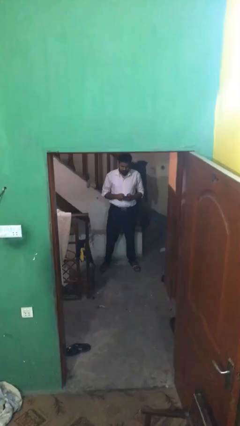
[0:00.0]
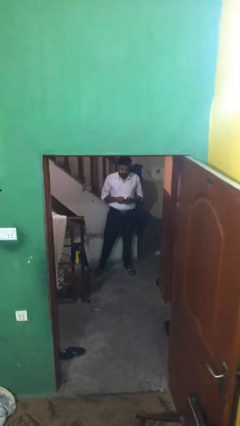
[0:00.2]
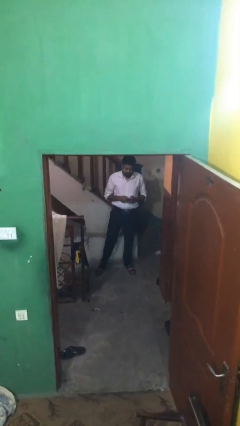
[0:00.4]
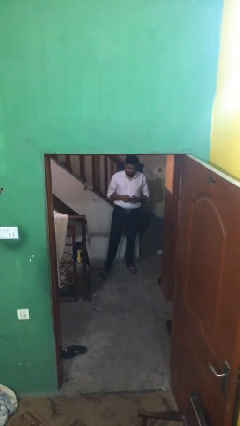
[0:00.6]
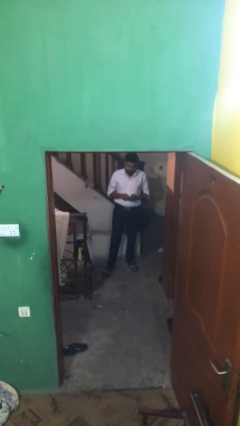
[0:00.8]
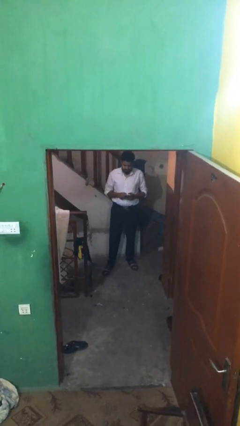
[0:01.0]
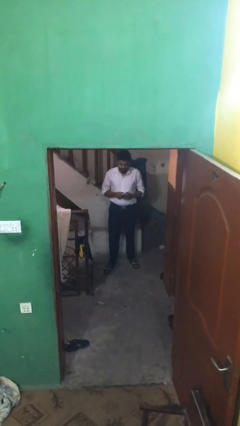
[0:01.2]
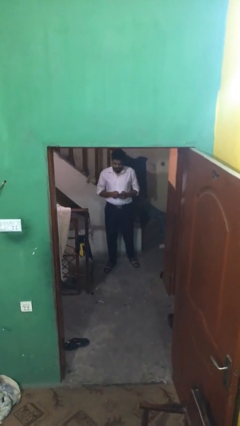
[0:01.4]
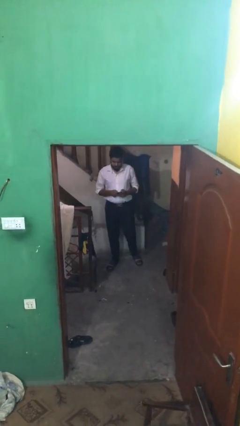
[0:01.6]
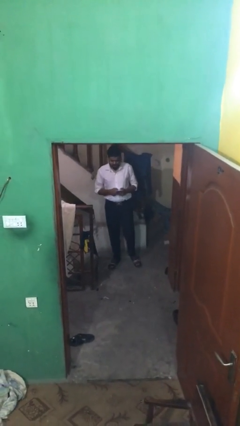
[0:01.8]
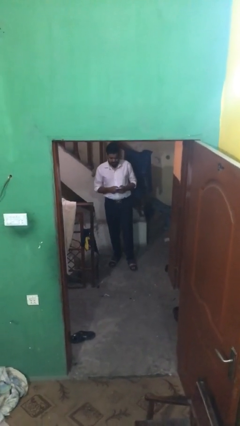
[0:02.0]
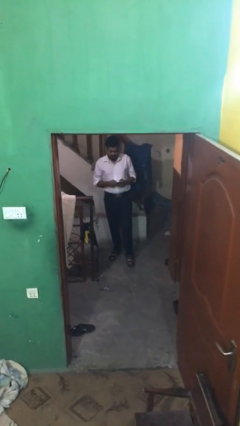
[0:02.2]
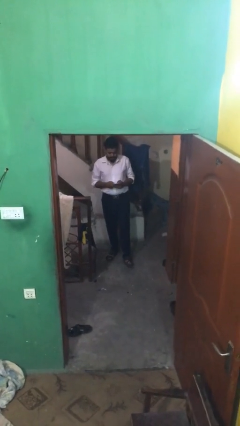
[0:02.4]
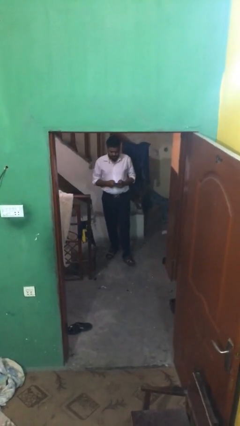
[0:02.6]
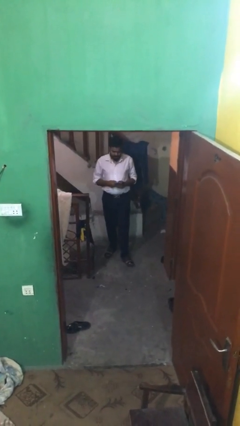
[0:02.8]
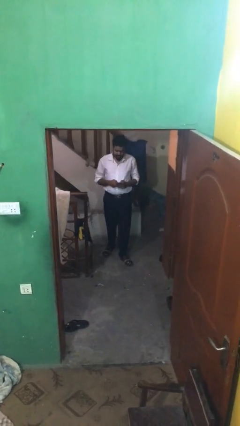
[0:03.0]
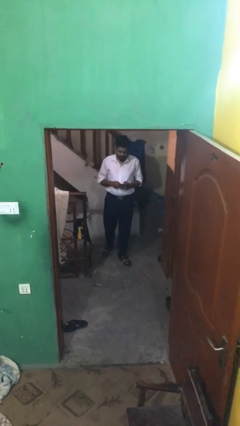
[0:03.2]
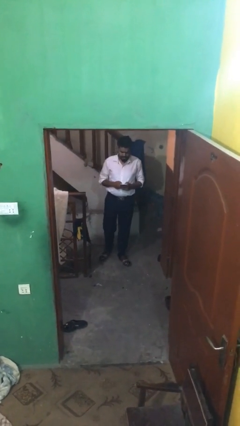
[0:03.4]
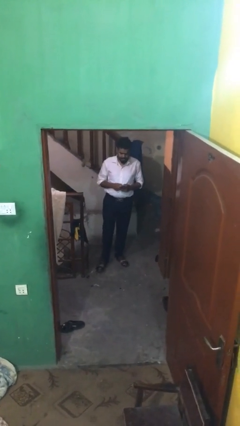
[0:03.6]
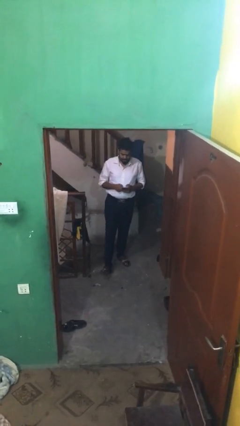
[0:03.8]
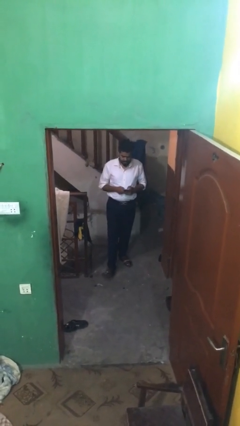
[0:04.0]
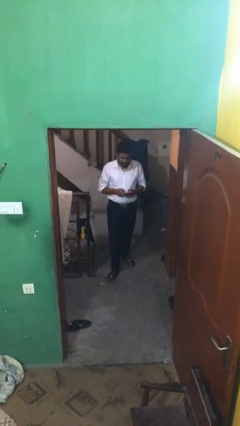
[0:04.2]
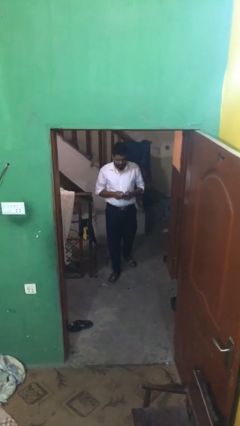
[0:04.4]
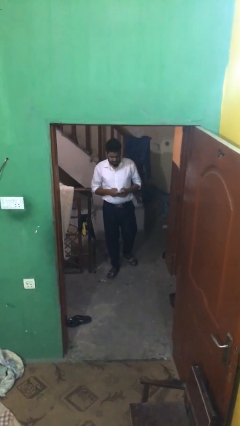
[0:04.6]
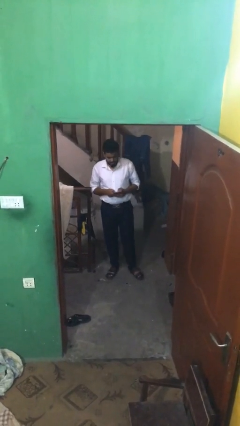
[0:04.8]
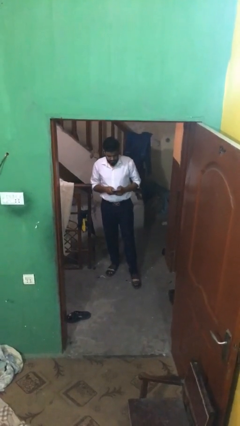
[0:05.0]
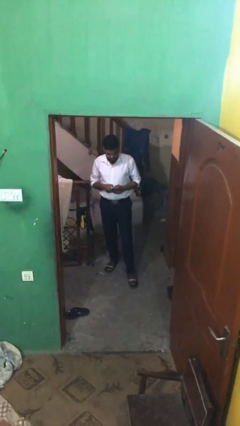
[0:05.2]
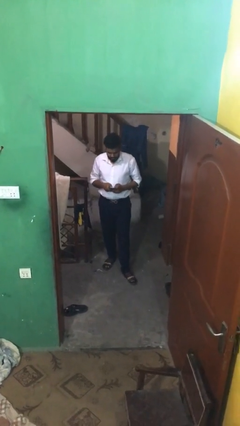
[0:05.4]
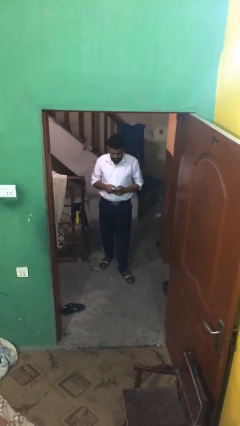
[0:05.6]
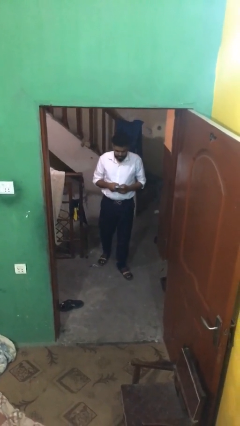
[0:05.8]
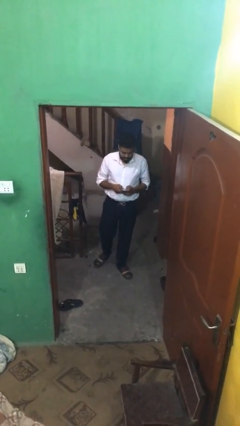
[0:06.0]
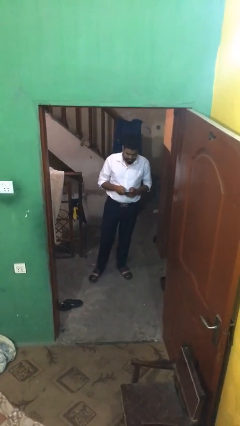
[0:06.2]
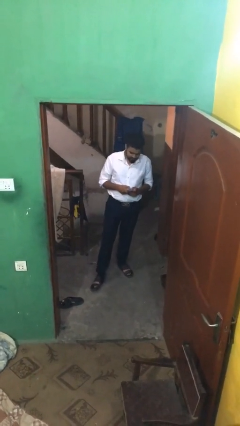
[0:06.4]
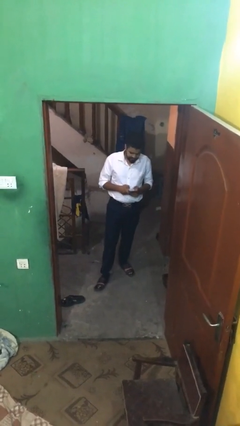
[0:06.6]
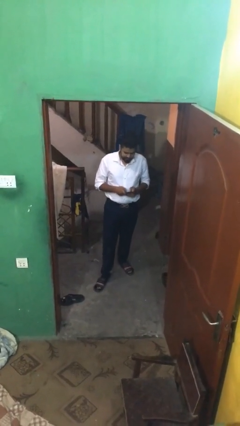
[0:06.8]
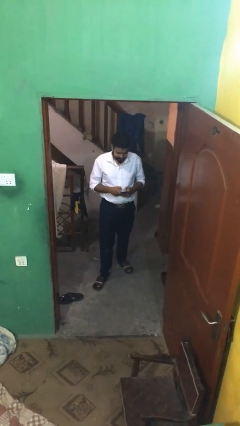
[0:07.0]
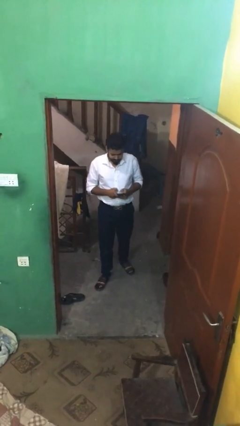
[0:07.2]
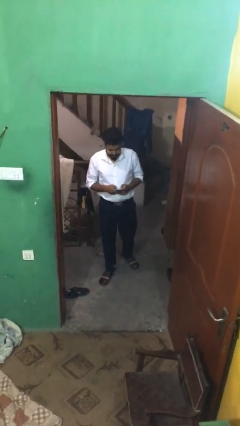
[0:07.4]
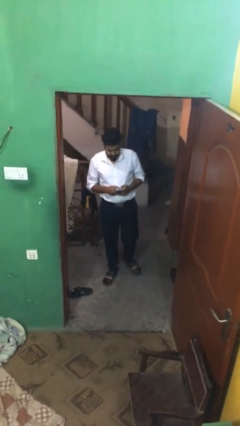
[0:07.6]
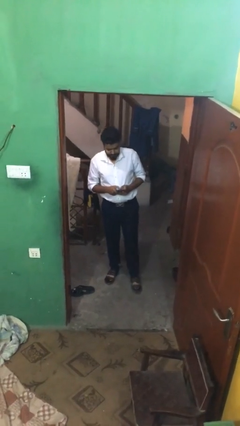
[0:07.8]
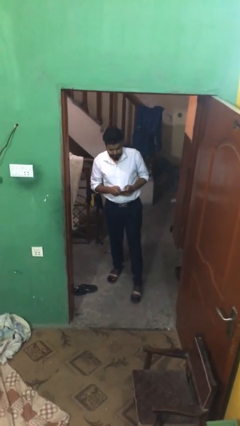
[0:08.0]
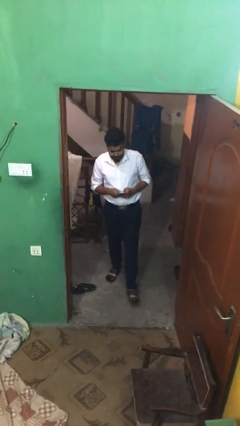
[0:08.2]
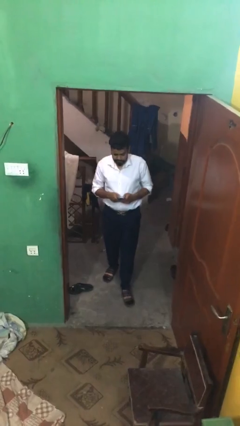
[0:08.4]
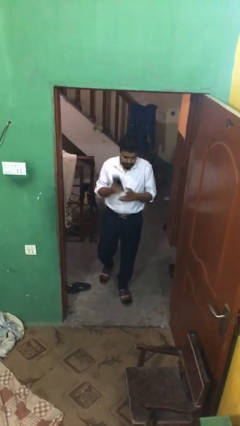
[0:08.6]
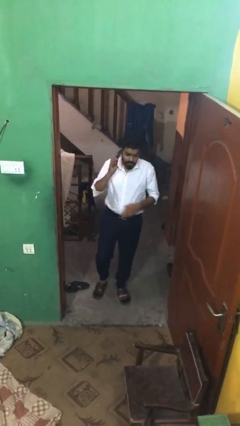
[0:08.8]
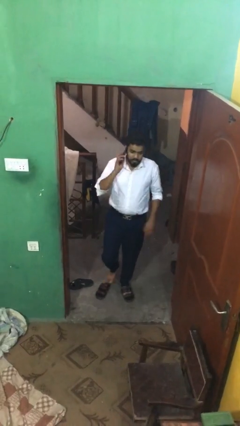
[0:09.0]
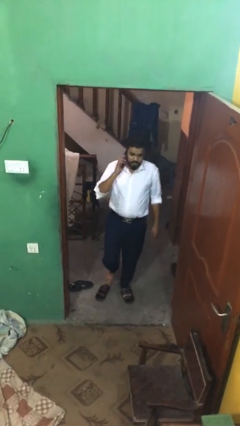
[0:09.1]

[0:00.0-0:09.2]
person texts on phone

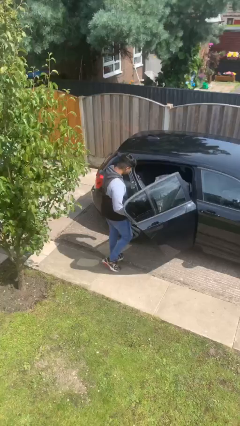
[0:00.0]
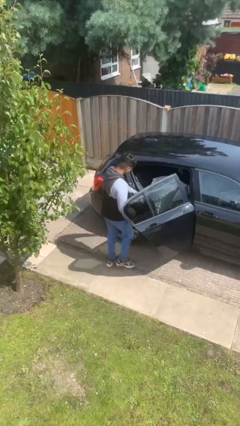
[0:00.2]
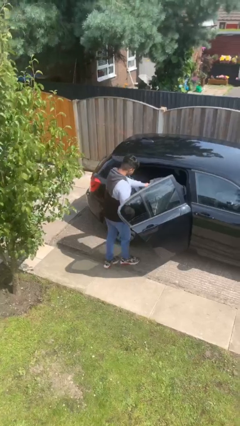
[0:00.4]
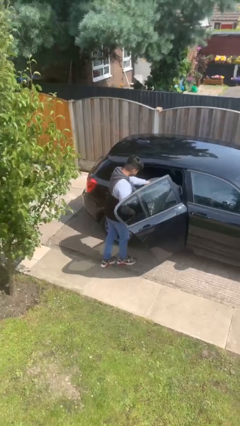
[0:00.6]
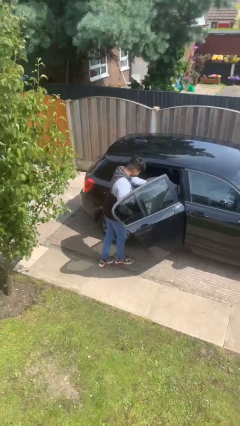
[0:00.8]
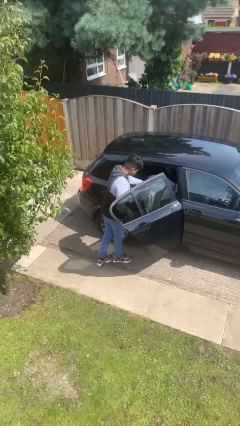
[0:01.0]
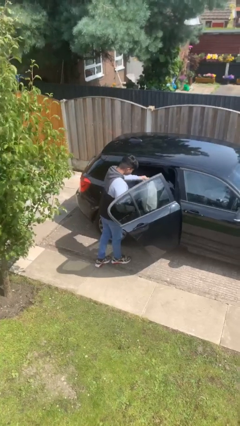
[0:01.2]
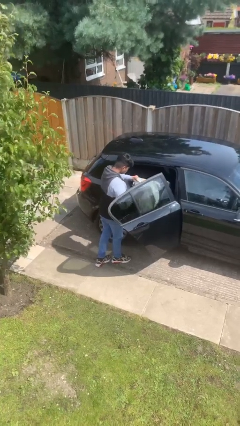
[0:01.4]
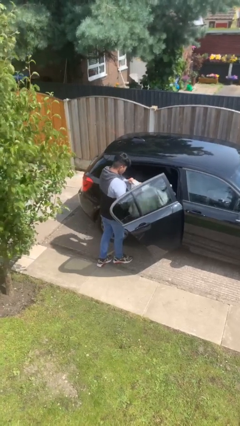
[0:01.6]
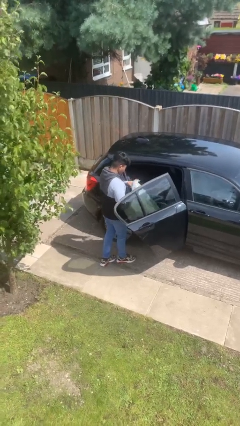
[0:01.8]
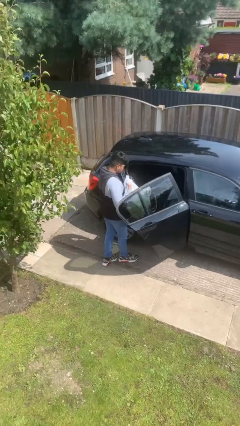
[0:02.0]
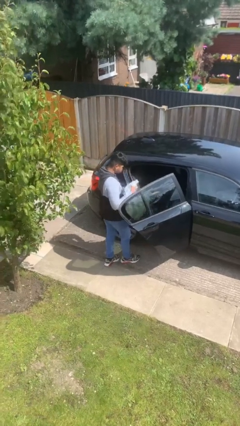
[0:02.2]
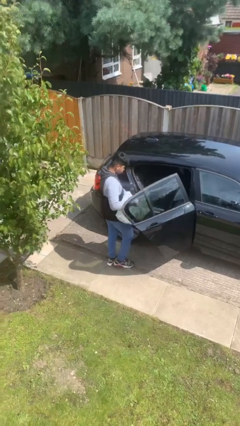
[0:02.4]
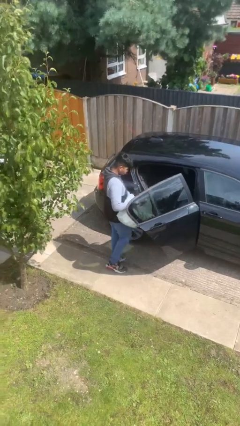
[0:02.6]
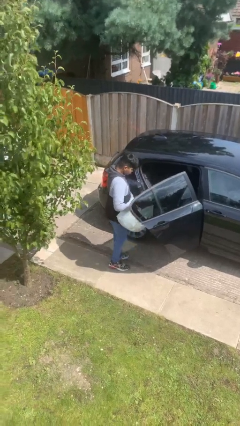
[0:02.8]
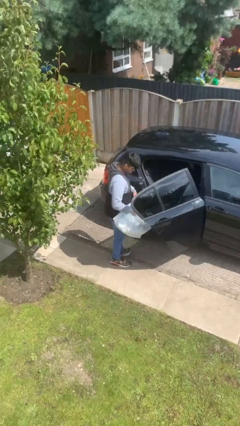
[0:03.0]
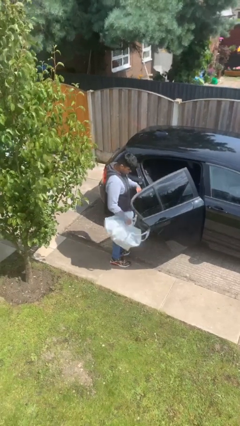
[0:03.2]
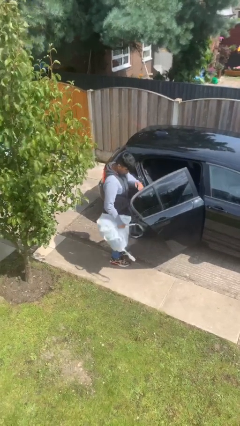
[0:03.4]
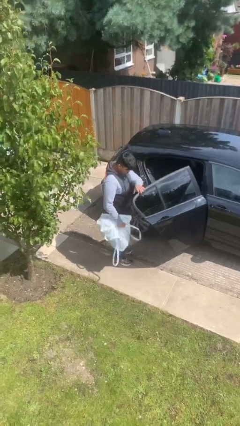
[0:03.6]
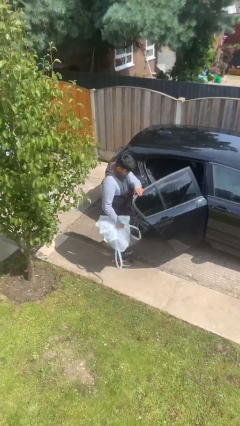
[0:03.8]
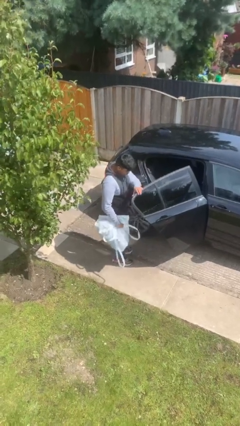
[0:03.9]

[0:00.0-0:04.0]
person unloads car

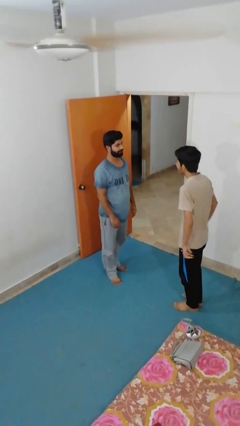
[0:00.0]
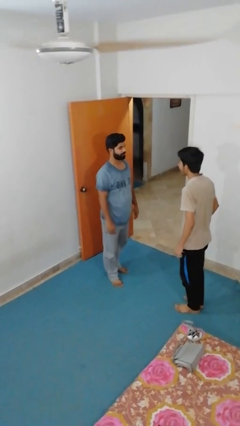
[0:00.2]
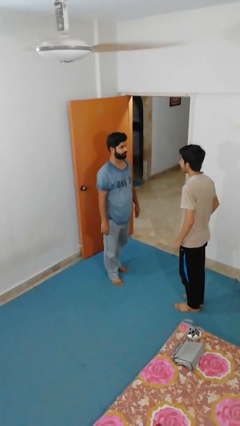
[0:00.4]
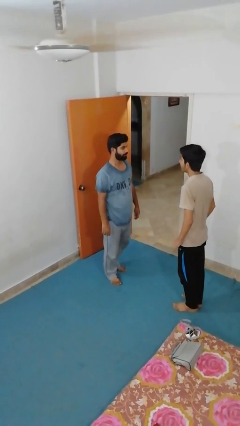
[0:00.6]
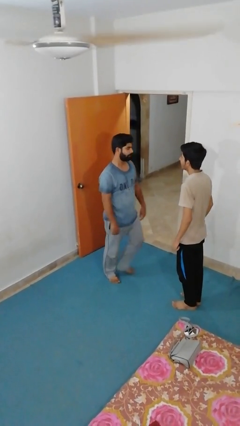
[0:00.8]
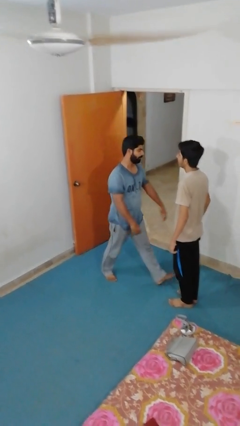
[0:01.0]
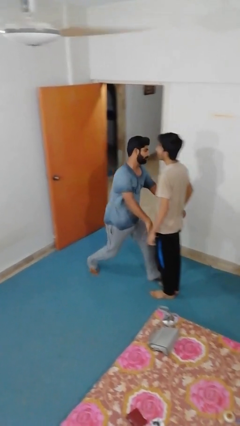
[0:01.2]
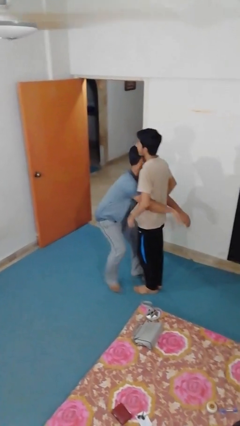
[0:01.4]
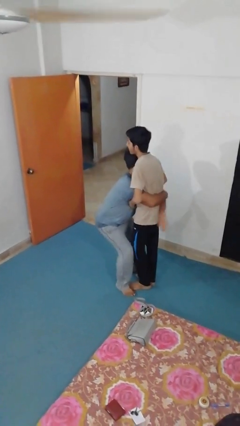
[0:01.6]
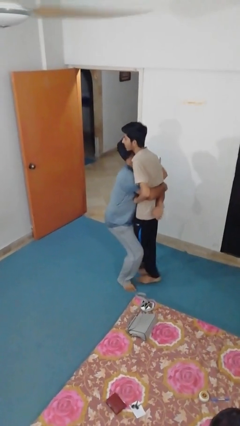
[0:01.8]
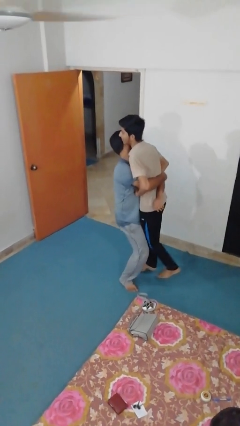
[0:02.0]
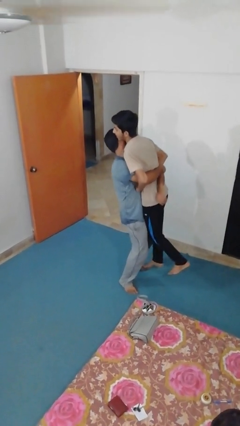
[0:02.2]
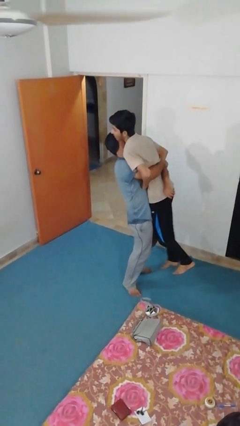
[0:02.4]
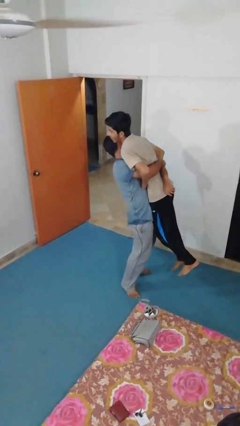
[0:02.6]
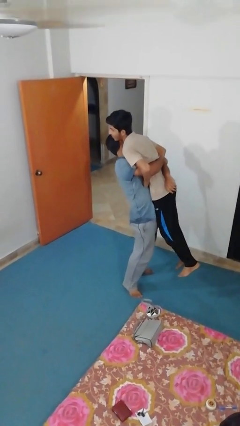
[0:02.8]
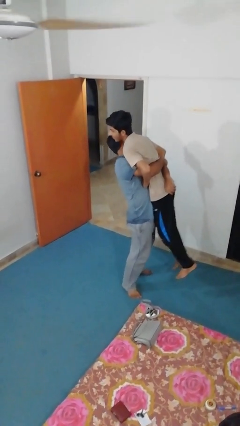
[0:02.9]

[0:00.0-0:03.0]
person picks up person

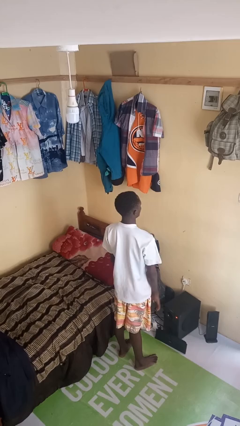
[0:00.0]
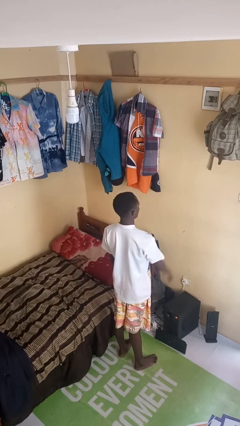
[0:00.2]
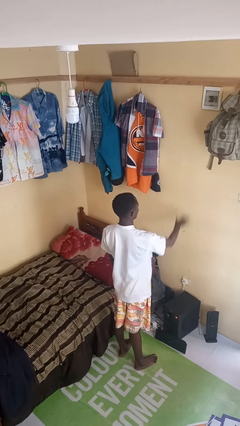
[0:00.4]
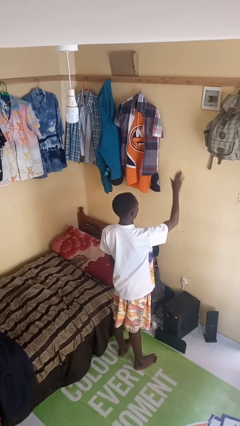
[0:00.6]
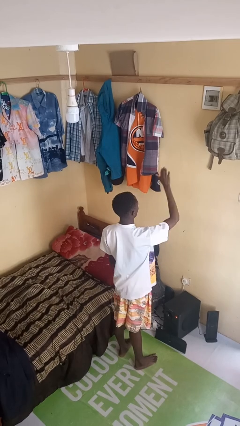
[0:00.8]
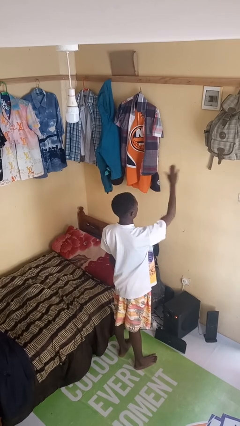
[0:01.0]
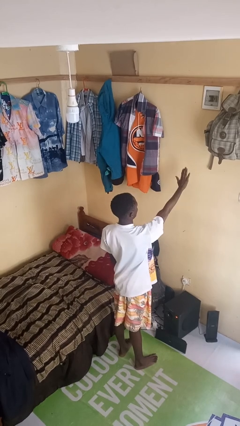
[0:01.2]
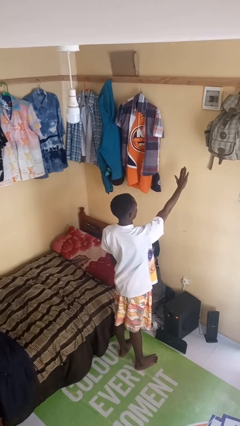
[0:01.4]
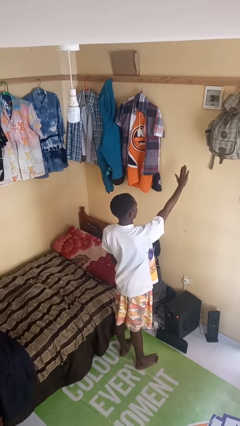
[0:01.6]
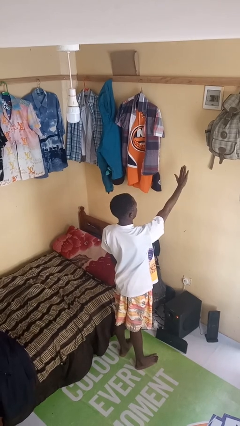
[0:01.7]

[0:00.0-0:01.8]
person gestures stop
